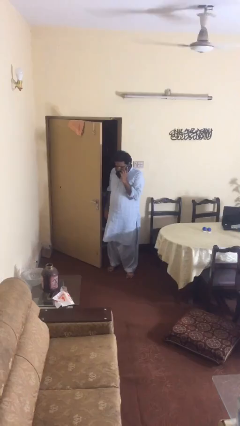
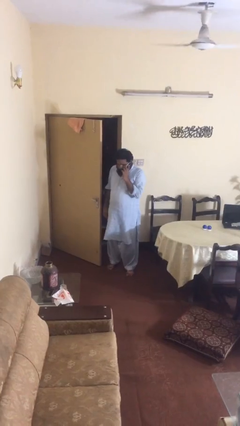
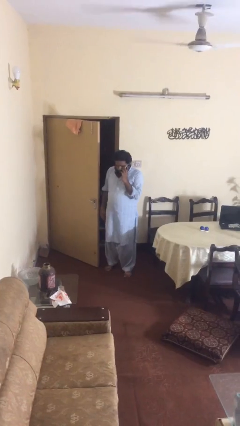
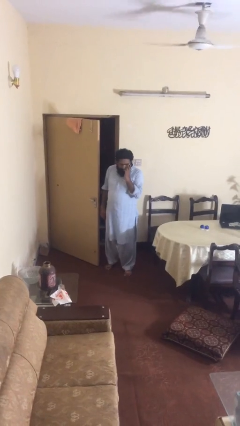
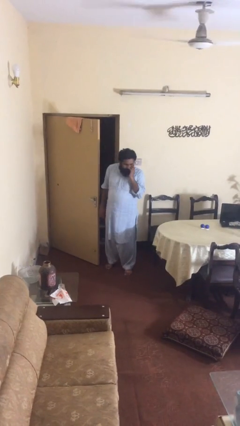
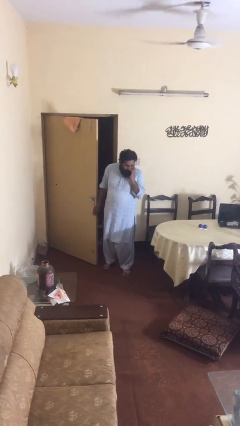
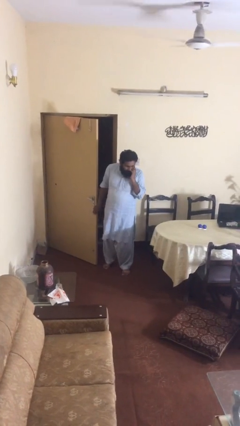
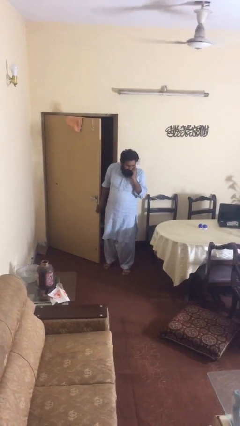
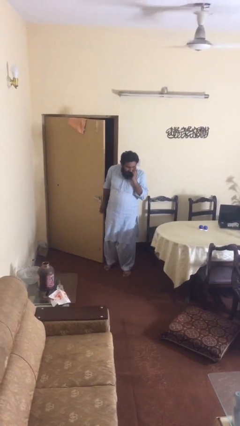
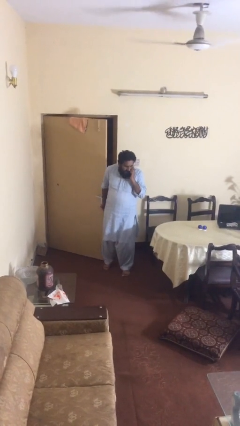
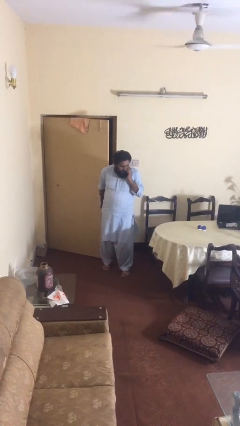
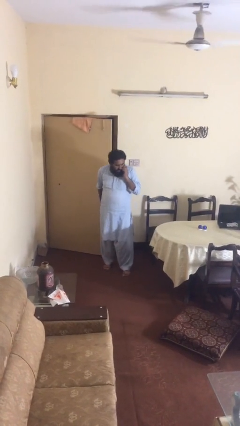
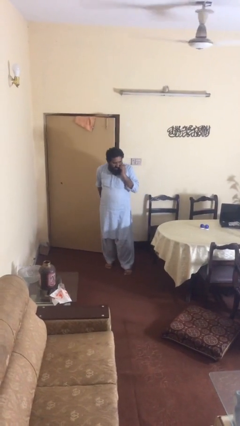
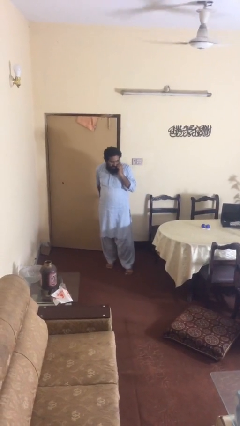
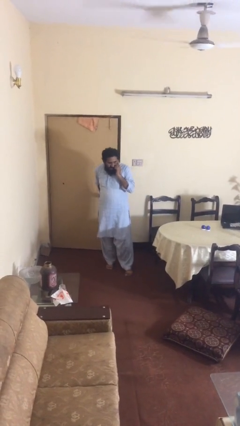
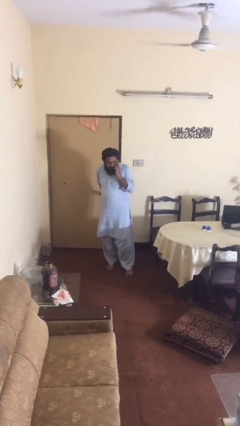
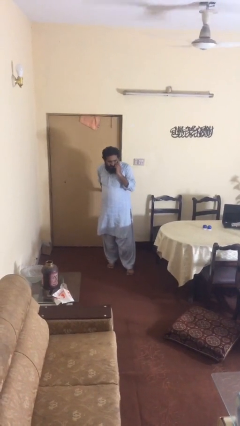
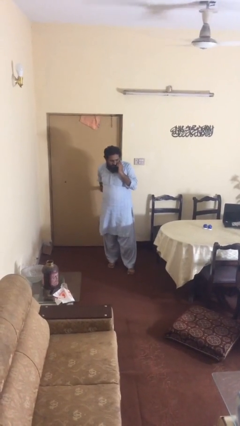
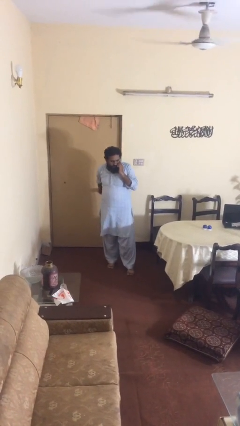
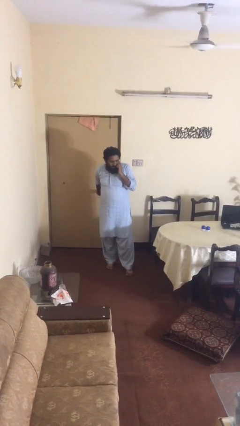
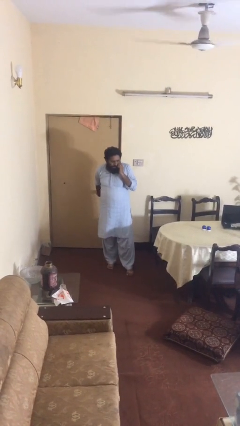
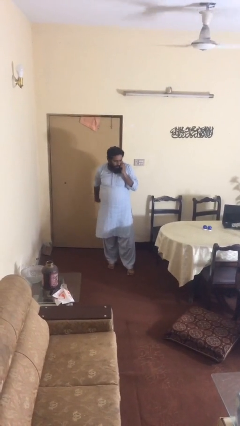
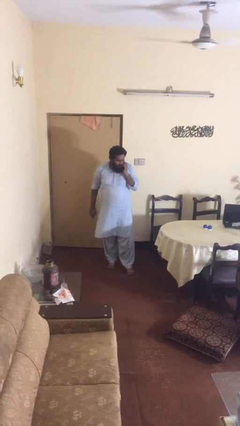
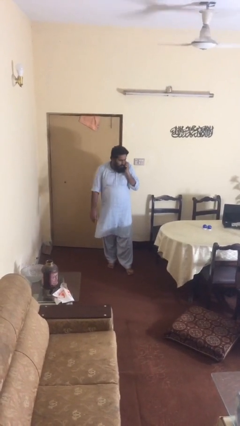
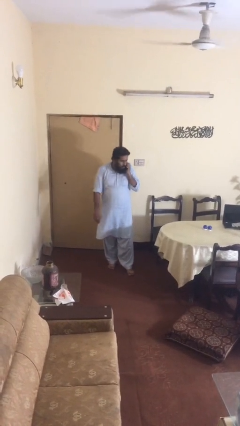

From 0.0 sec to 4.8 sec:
person closes facility door

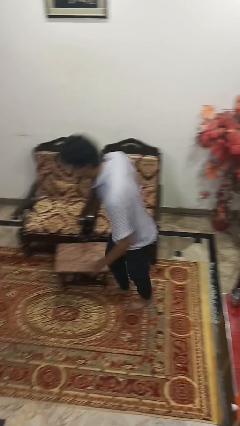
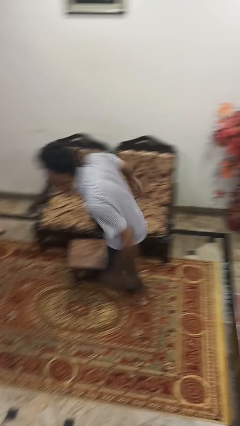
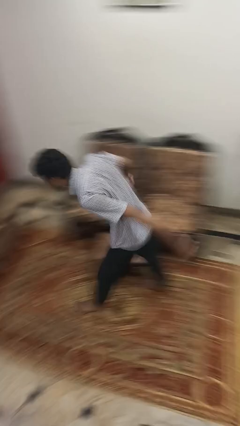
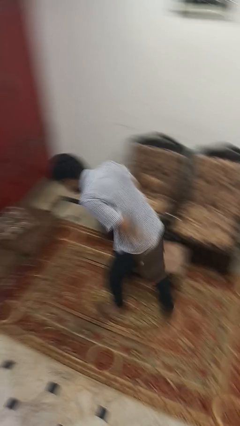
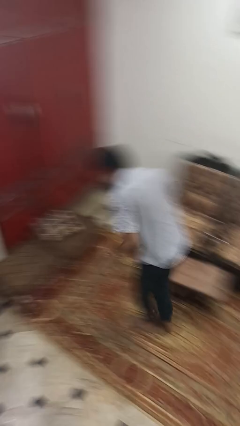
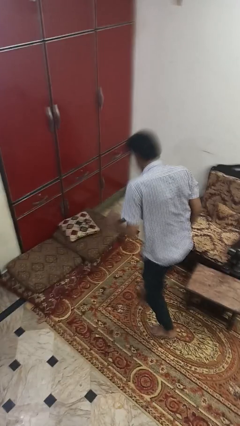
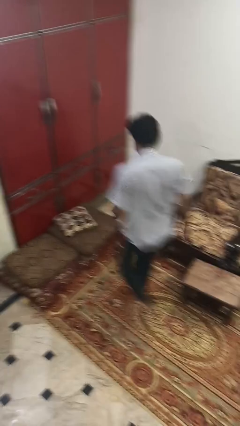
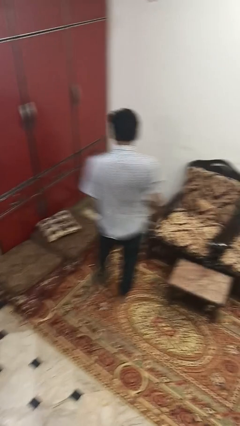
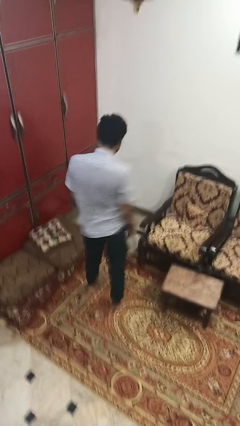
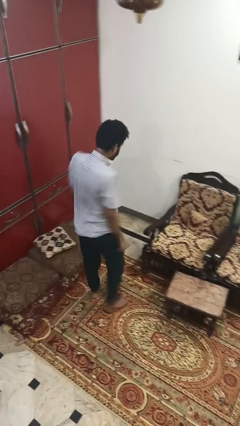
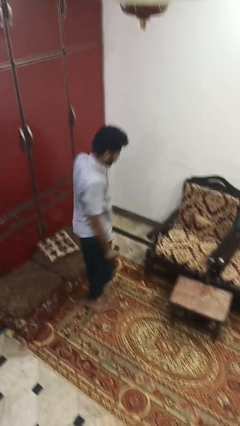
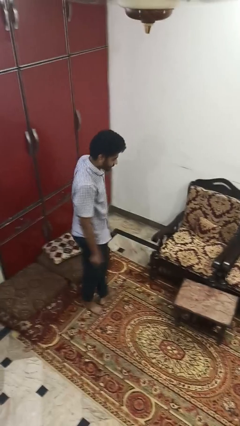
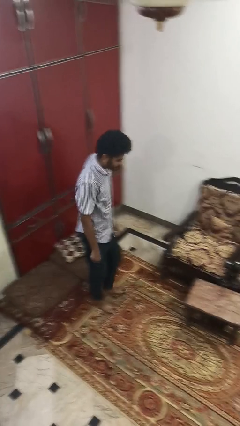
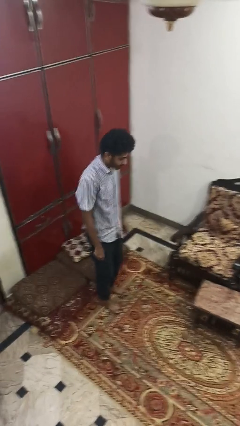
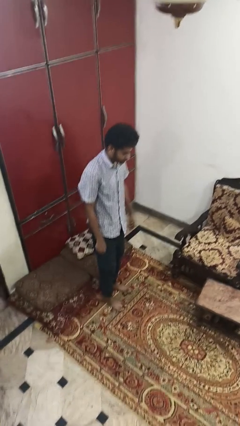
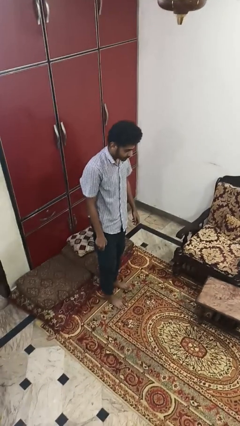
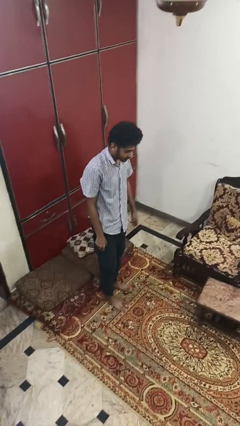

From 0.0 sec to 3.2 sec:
person bumps into table

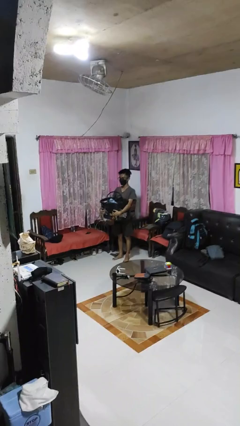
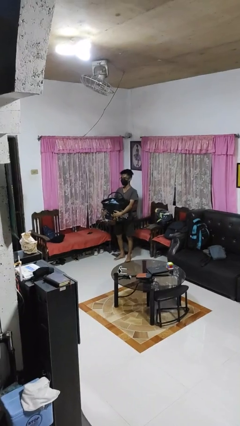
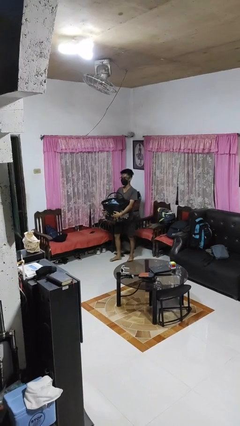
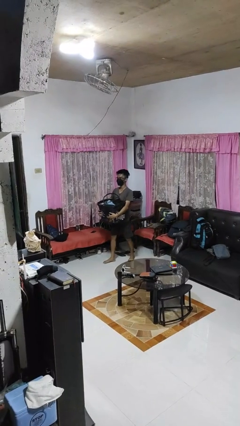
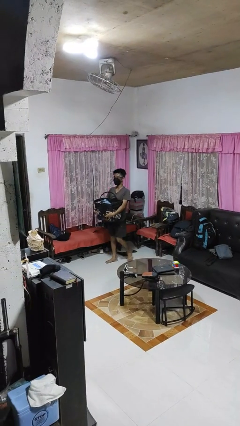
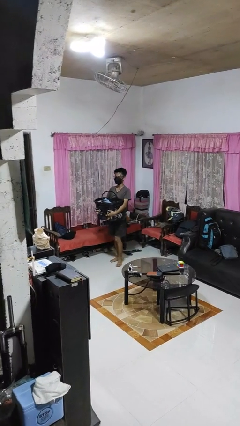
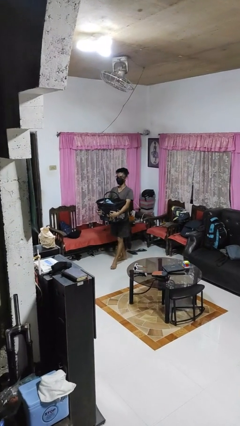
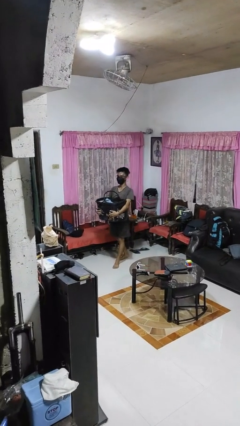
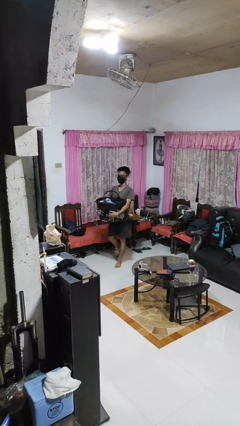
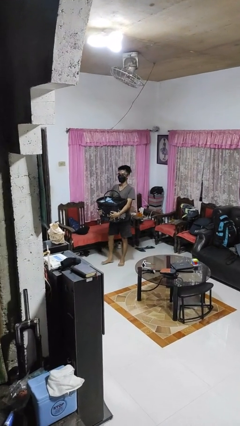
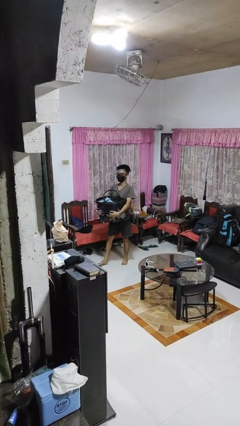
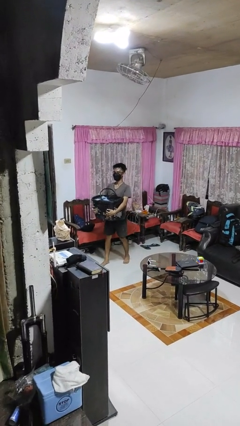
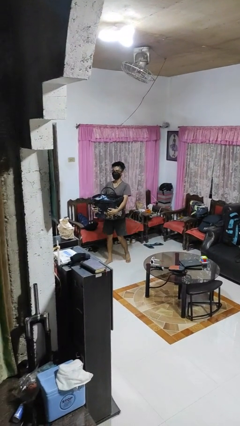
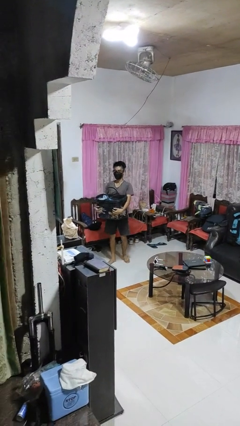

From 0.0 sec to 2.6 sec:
person carries laundry basket

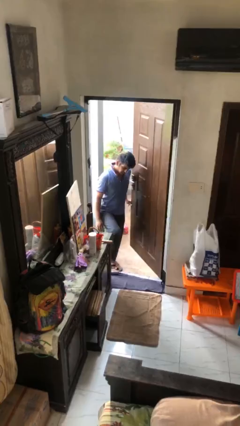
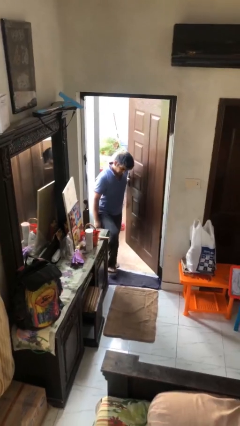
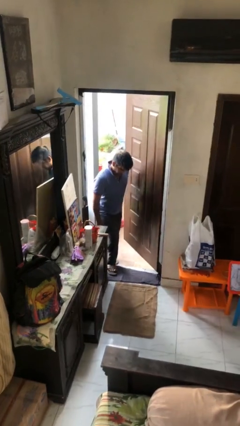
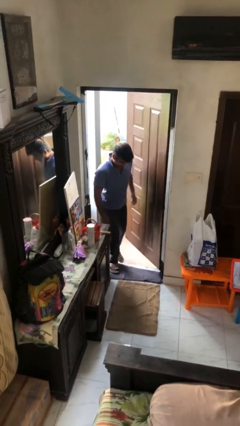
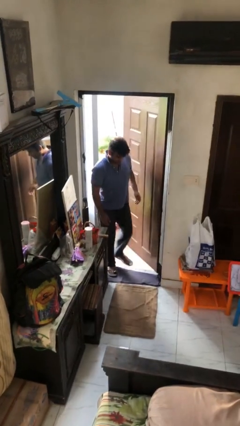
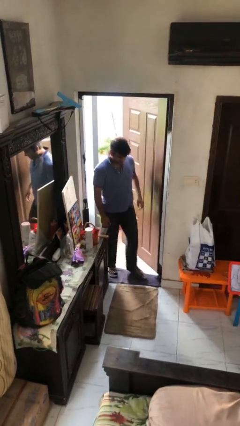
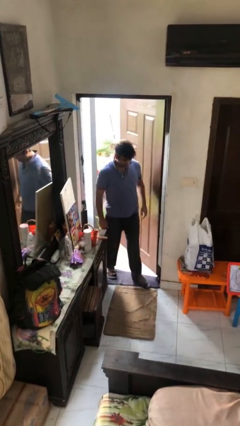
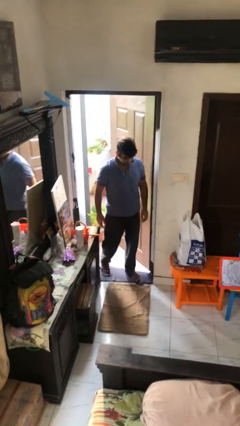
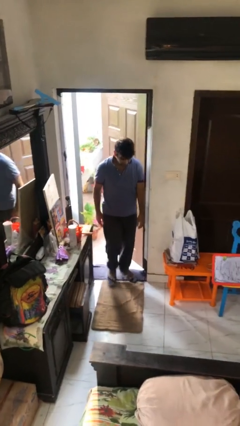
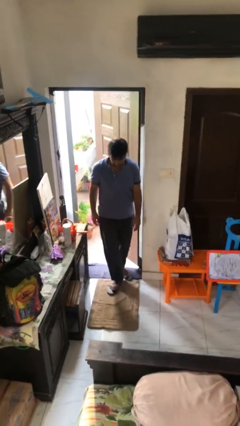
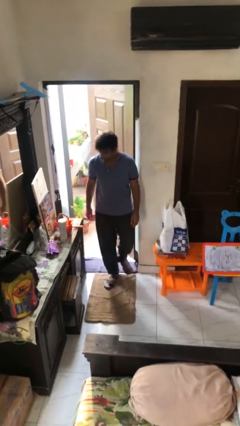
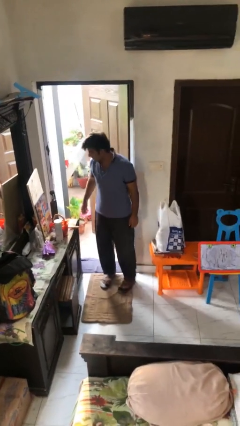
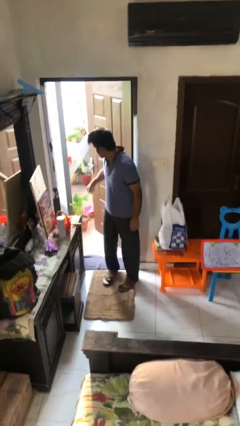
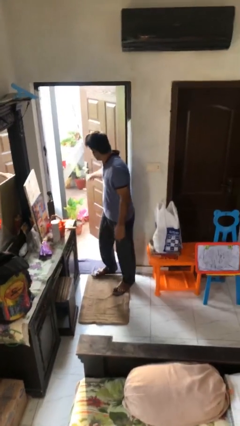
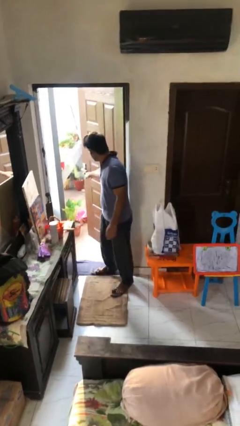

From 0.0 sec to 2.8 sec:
person enters scene through structure

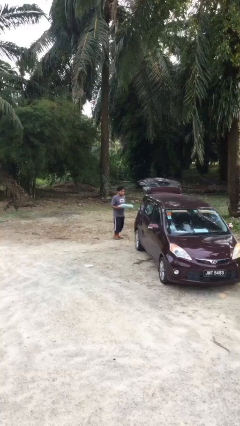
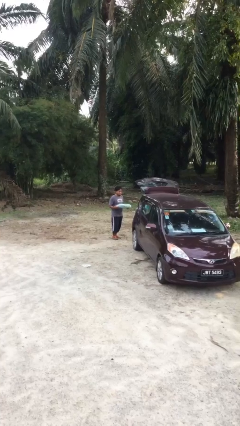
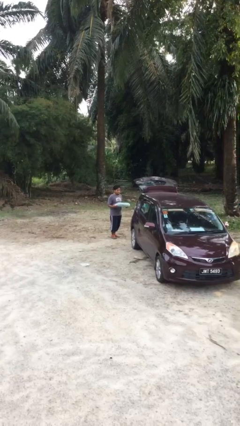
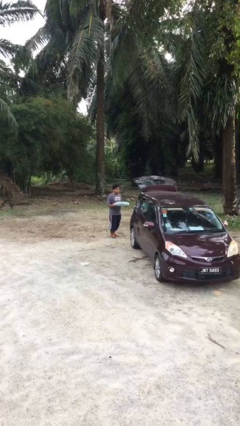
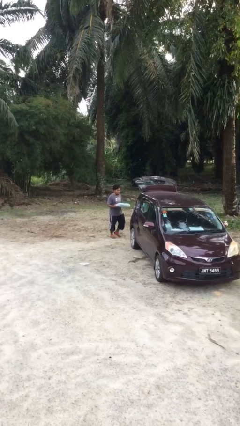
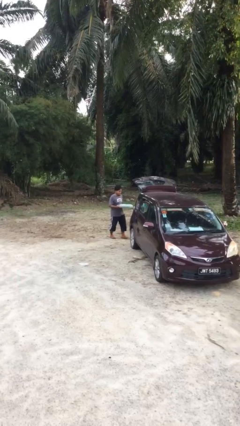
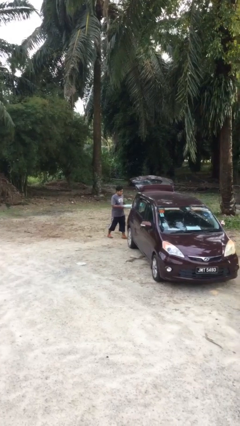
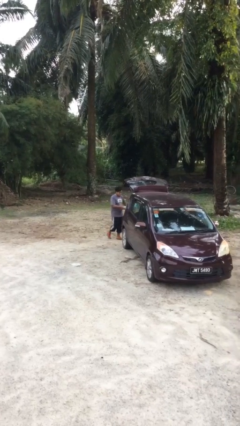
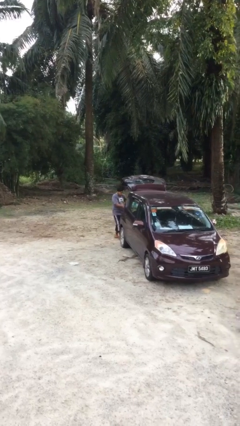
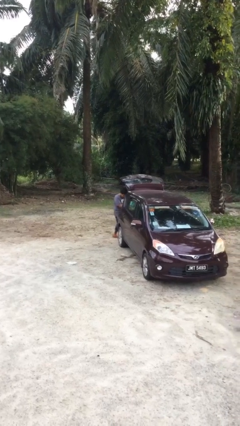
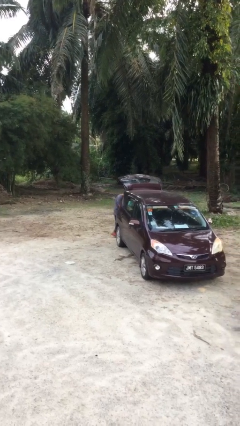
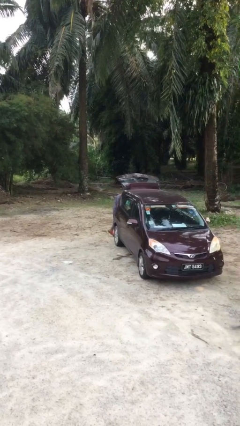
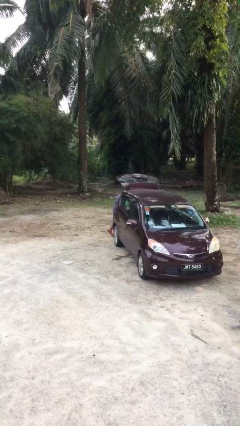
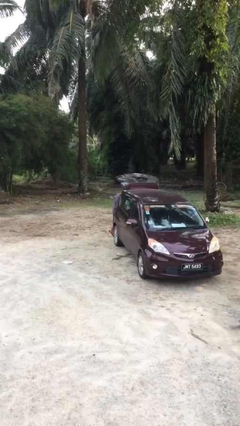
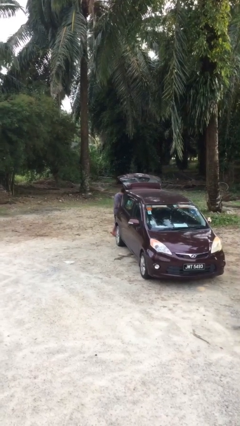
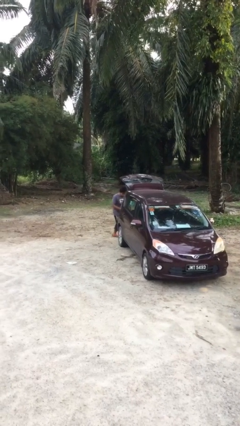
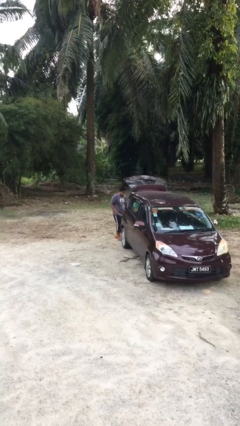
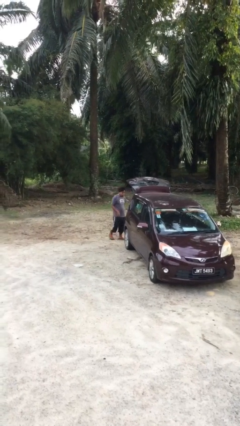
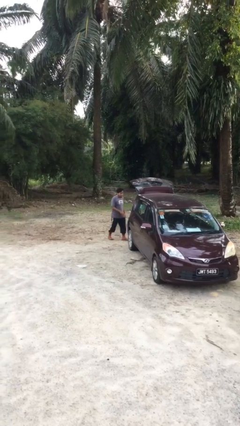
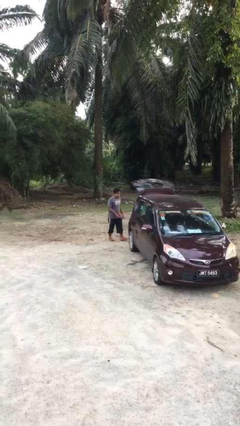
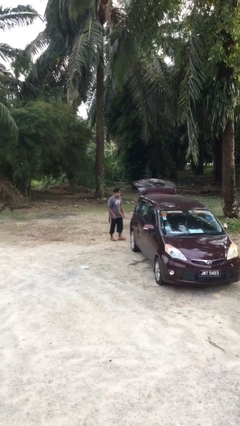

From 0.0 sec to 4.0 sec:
person loads car
